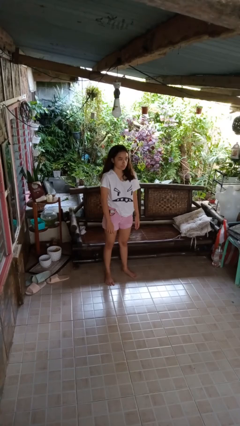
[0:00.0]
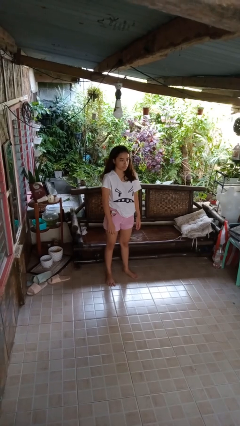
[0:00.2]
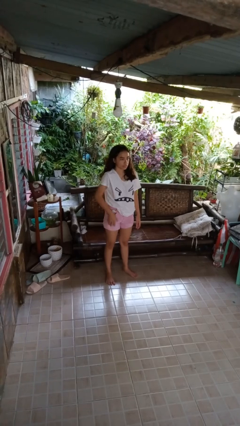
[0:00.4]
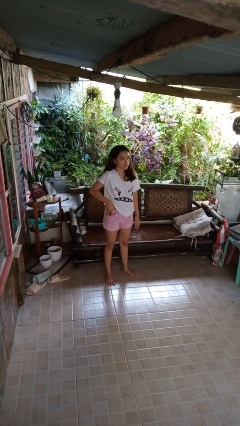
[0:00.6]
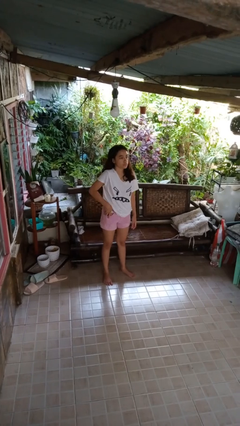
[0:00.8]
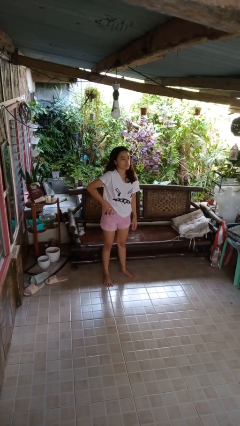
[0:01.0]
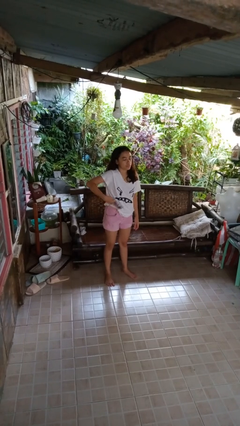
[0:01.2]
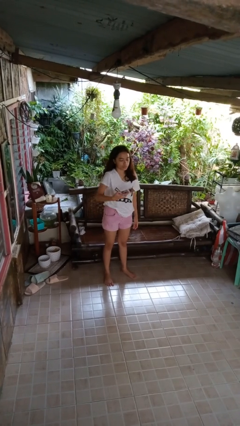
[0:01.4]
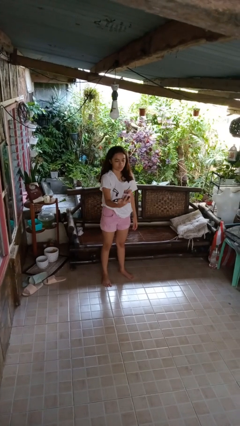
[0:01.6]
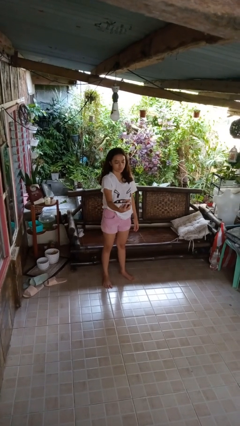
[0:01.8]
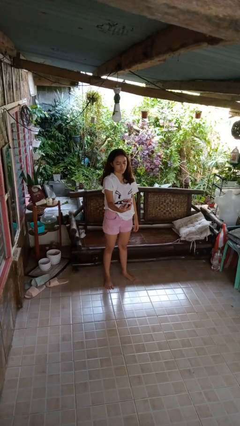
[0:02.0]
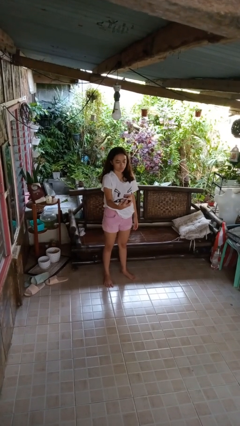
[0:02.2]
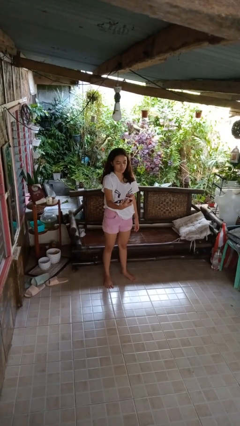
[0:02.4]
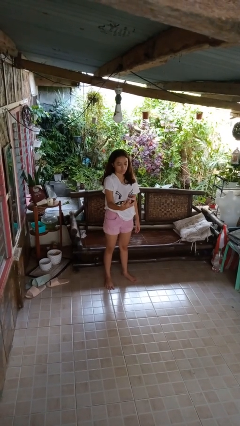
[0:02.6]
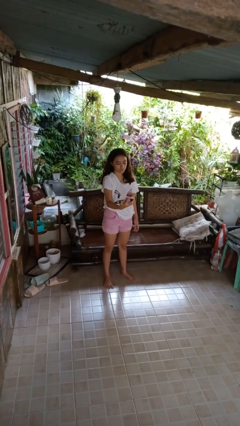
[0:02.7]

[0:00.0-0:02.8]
person takes phone from pocket

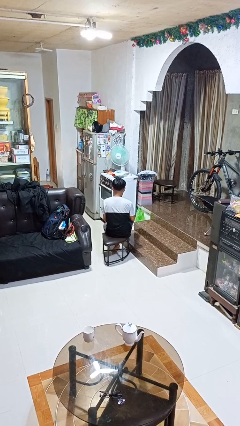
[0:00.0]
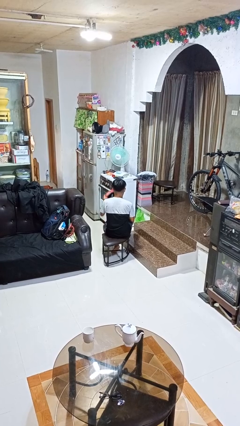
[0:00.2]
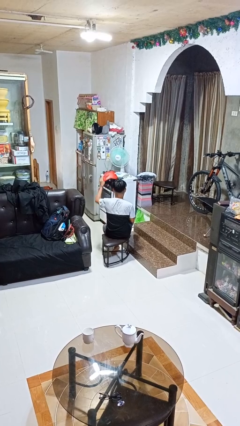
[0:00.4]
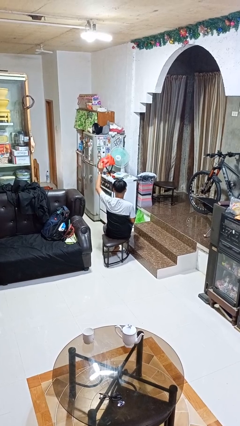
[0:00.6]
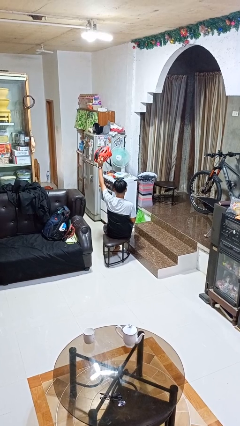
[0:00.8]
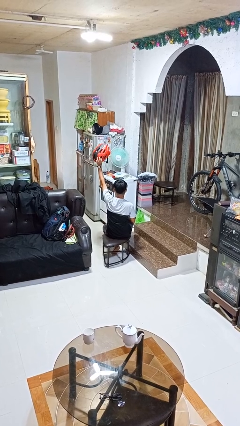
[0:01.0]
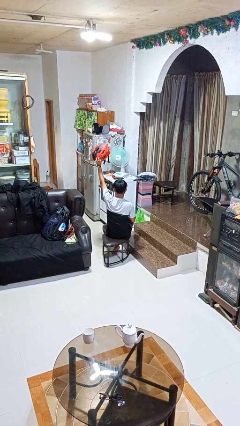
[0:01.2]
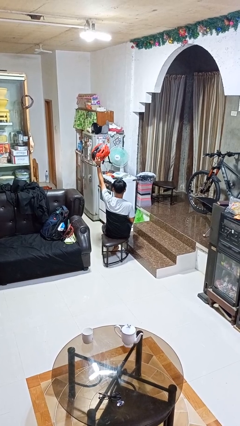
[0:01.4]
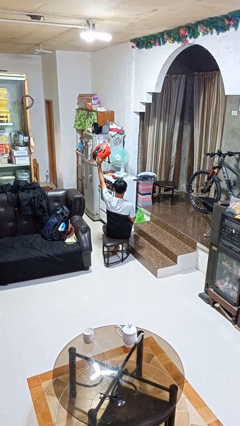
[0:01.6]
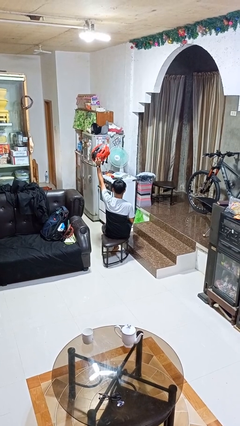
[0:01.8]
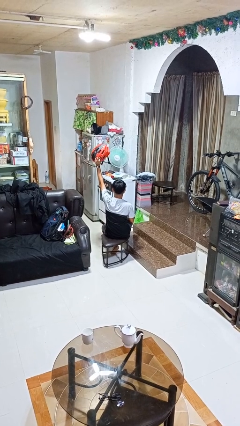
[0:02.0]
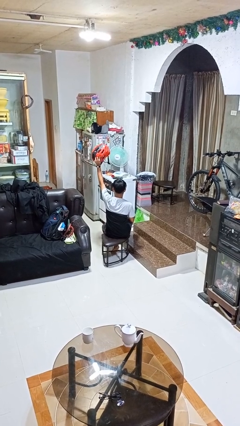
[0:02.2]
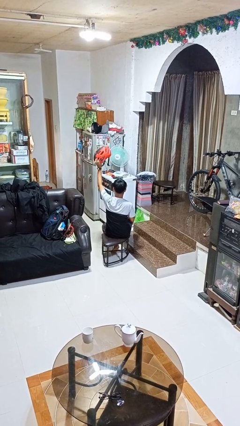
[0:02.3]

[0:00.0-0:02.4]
person holds object above head

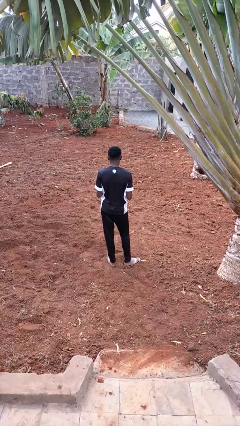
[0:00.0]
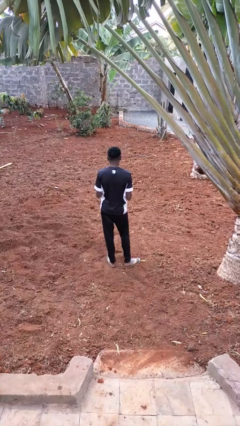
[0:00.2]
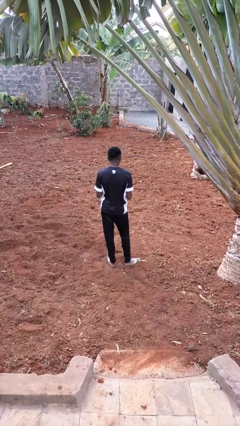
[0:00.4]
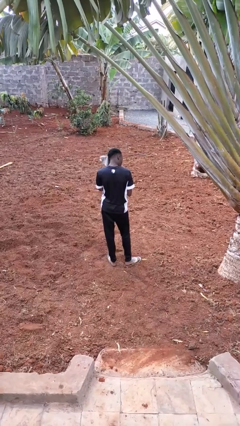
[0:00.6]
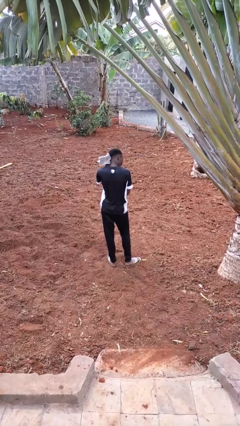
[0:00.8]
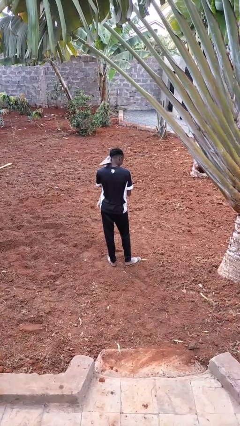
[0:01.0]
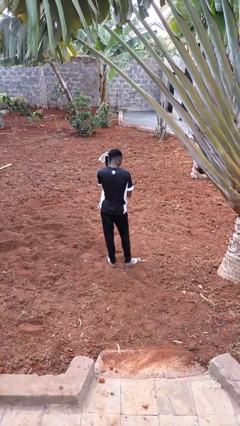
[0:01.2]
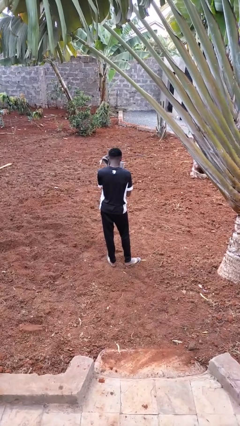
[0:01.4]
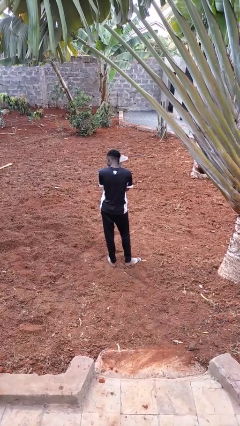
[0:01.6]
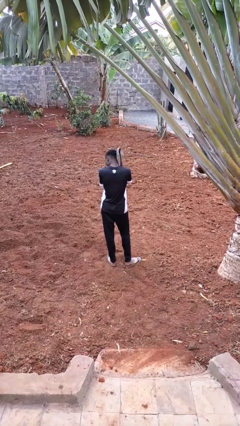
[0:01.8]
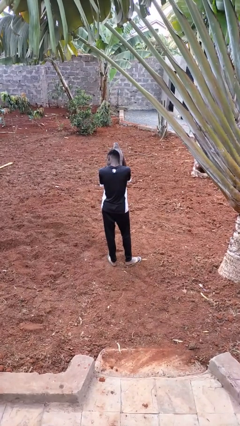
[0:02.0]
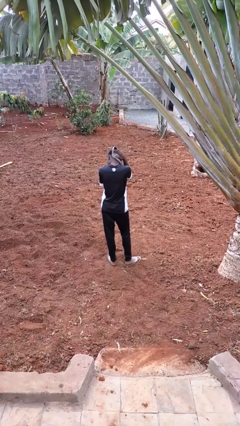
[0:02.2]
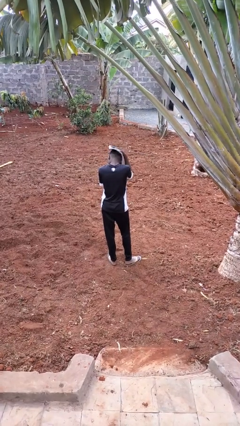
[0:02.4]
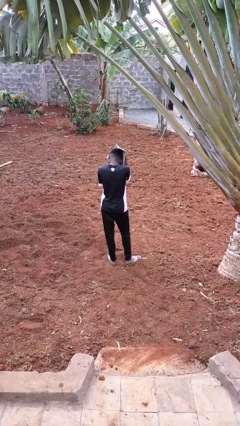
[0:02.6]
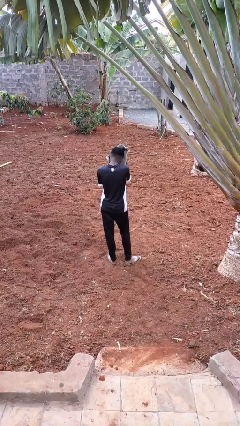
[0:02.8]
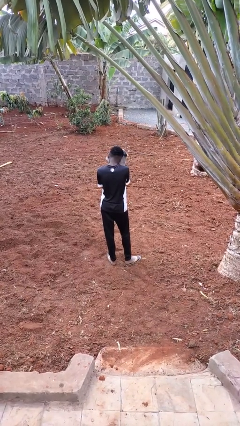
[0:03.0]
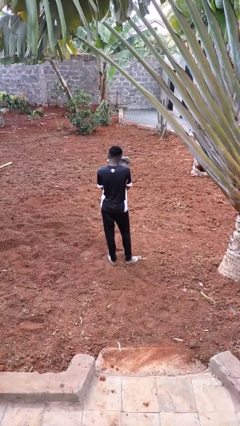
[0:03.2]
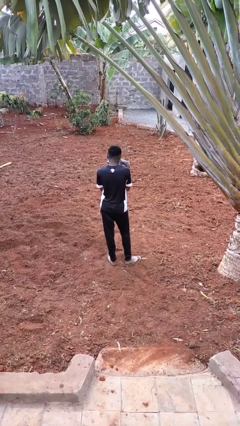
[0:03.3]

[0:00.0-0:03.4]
person dries hair with towel

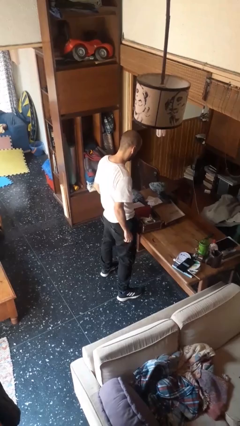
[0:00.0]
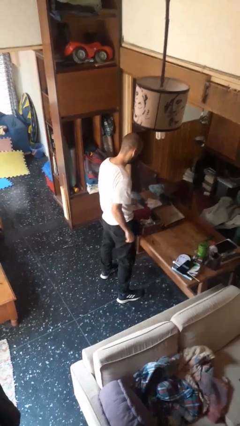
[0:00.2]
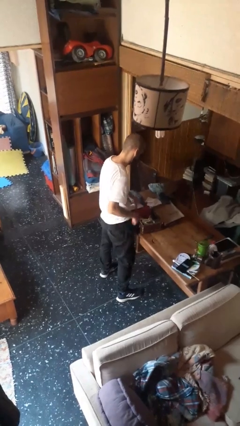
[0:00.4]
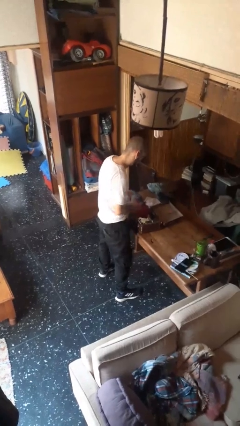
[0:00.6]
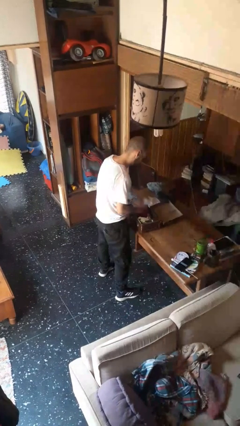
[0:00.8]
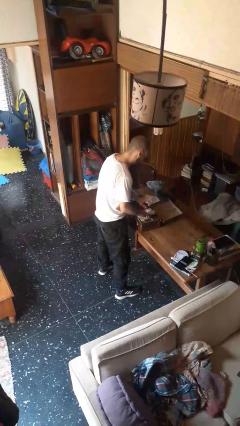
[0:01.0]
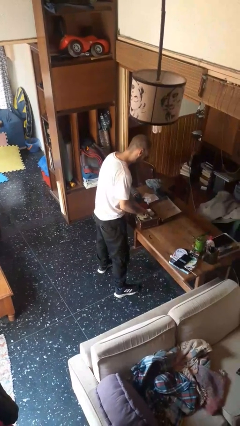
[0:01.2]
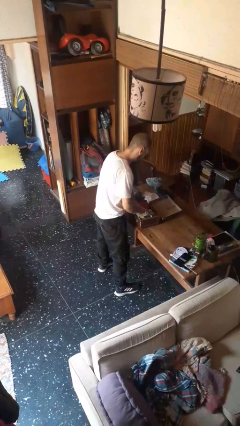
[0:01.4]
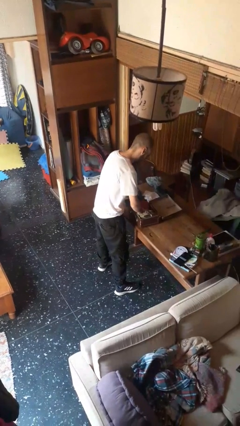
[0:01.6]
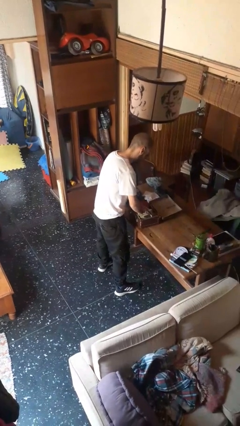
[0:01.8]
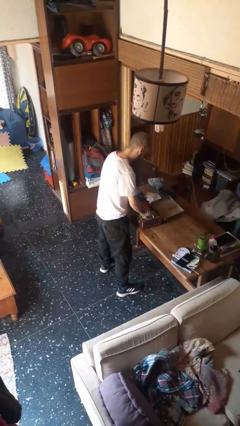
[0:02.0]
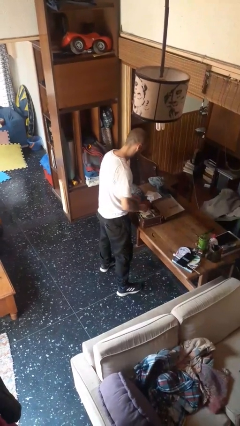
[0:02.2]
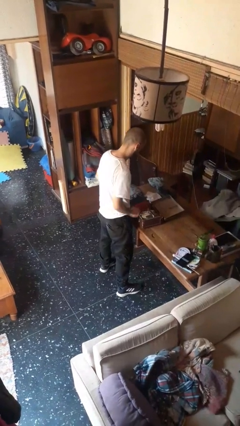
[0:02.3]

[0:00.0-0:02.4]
person loads clothes into suitcase

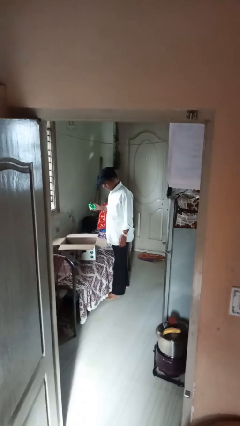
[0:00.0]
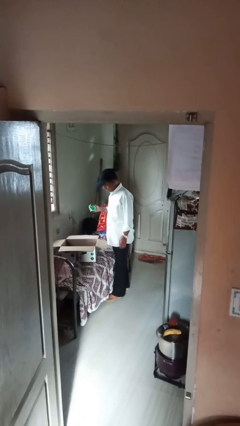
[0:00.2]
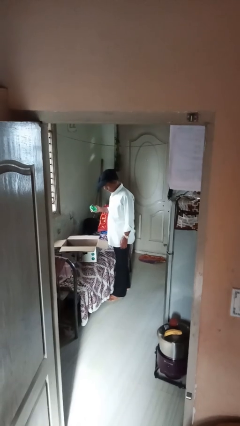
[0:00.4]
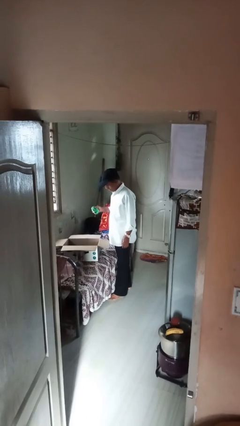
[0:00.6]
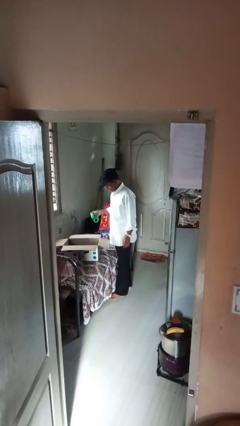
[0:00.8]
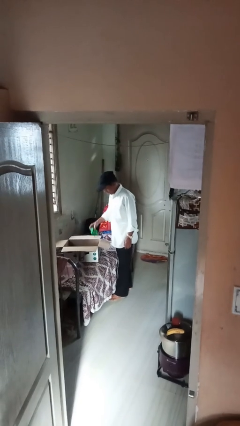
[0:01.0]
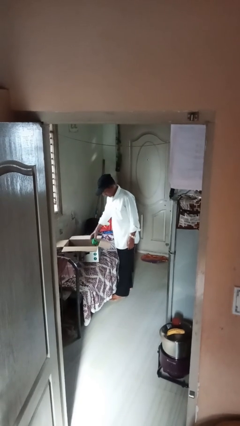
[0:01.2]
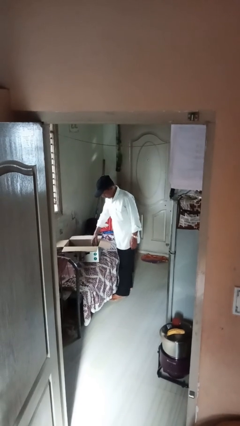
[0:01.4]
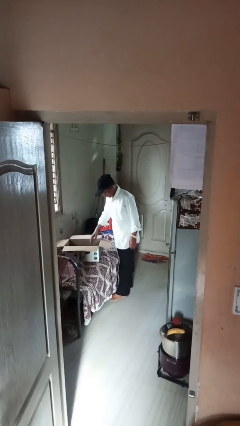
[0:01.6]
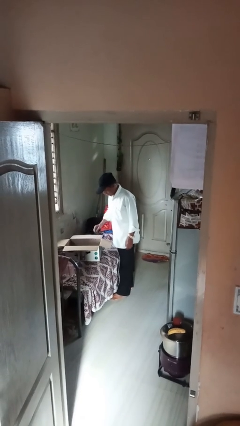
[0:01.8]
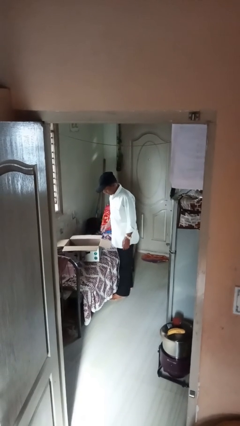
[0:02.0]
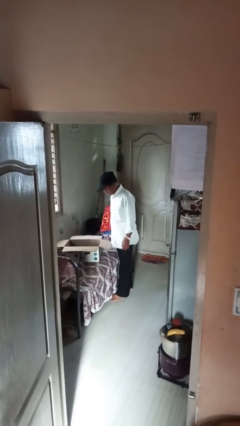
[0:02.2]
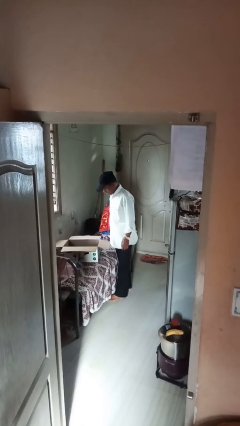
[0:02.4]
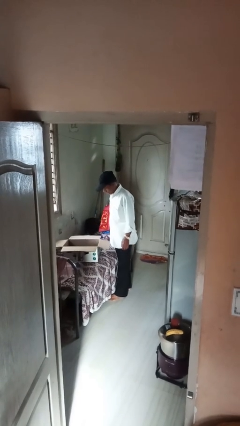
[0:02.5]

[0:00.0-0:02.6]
person puts object into box

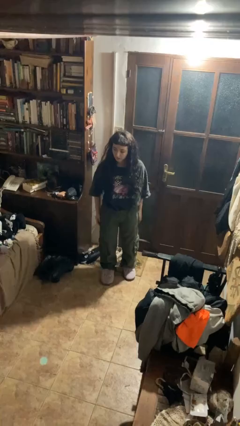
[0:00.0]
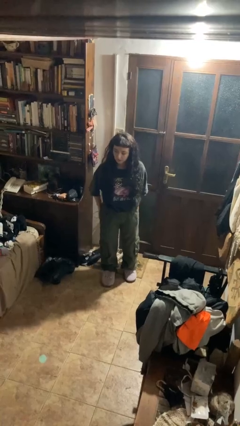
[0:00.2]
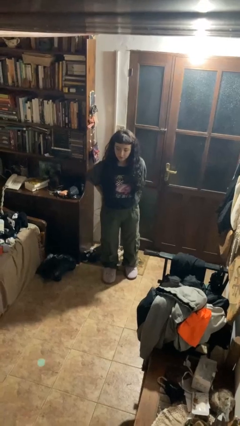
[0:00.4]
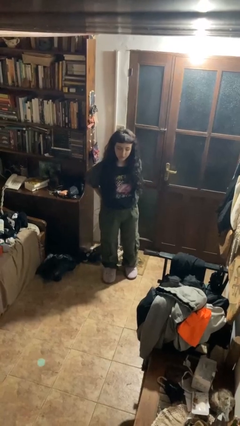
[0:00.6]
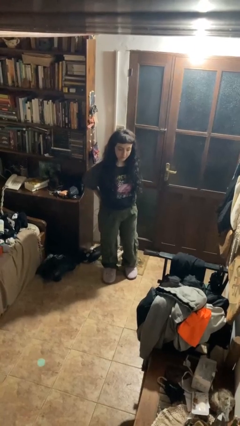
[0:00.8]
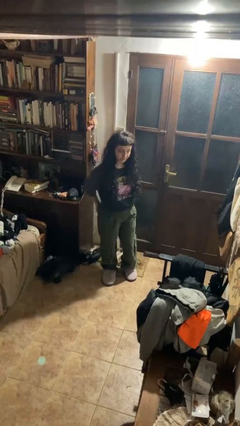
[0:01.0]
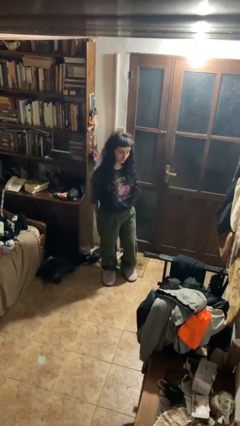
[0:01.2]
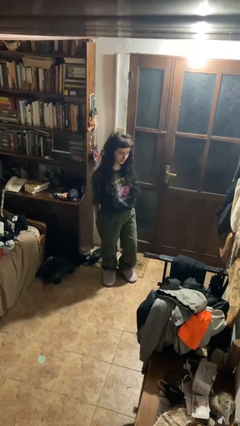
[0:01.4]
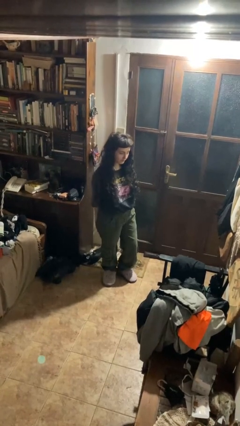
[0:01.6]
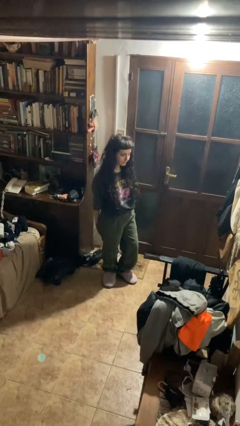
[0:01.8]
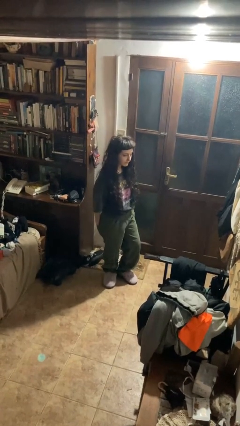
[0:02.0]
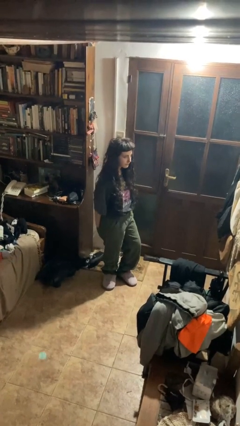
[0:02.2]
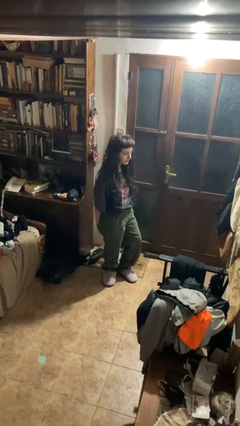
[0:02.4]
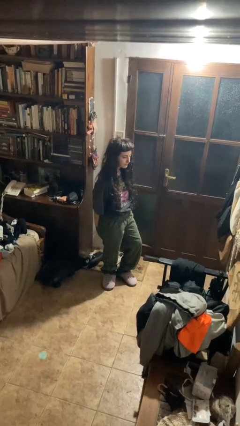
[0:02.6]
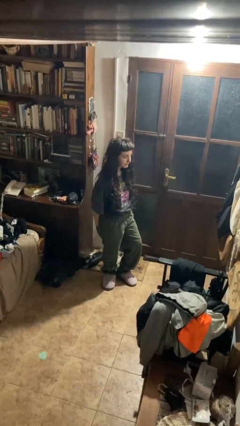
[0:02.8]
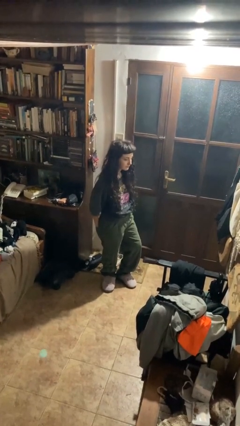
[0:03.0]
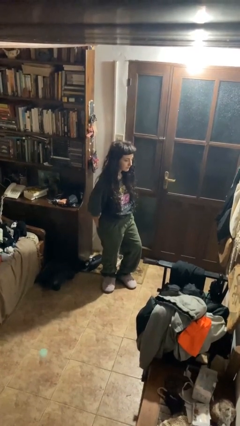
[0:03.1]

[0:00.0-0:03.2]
person puts hands in back pockets

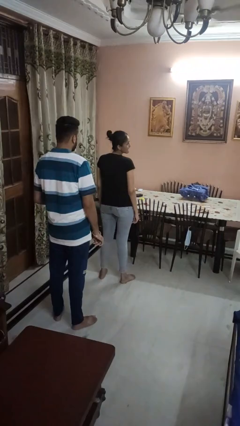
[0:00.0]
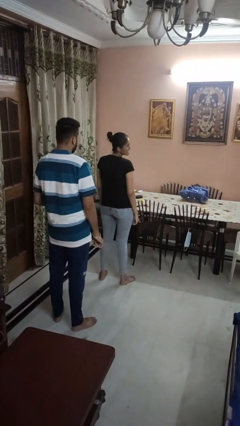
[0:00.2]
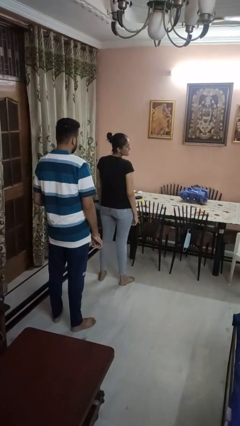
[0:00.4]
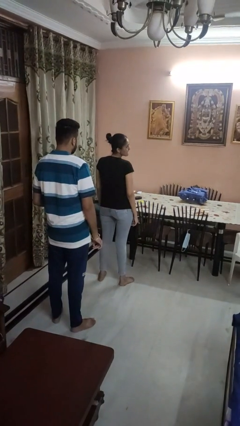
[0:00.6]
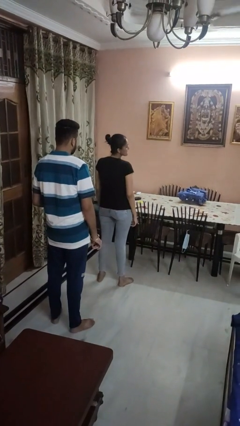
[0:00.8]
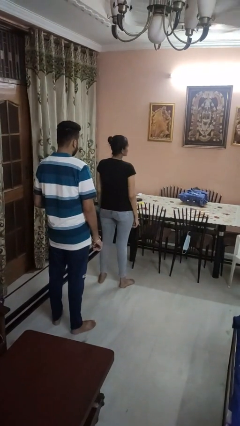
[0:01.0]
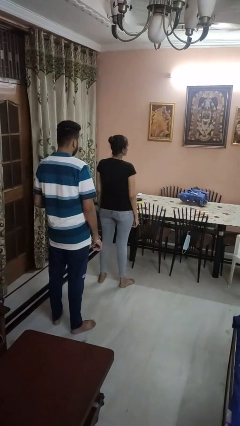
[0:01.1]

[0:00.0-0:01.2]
person looks over shoulder
